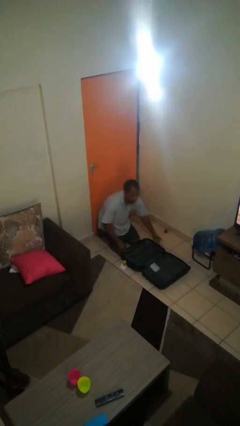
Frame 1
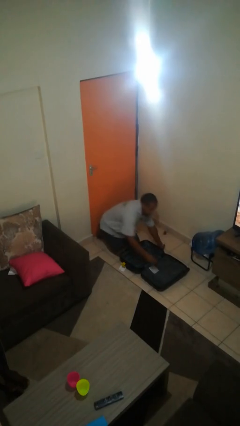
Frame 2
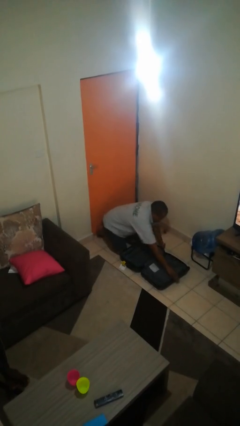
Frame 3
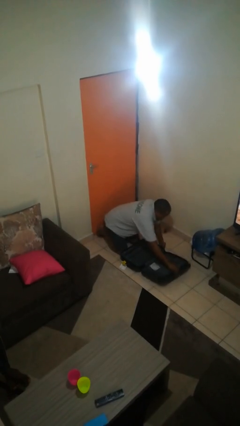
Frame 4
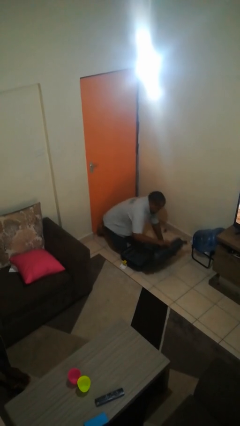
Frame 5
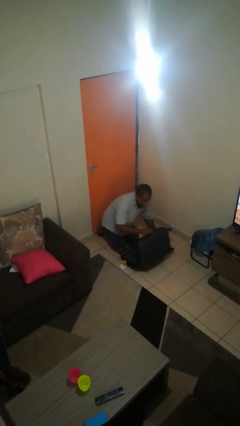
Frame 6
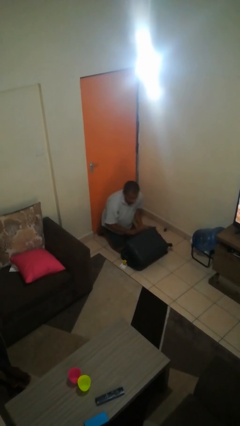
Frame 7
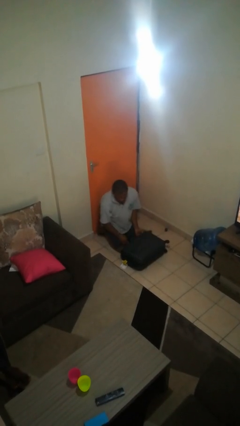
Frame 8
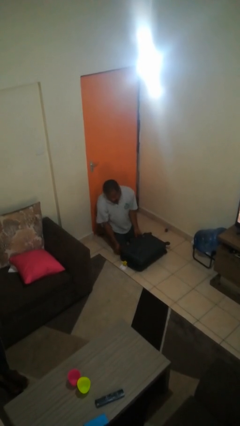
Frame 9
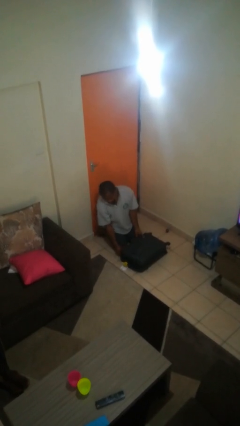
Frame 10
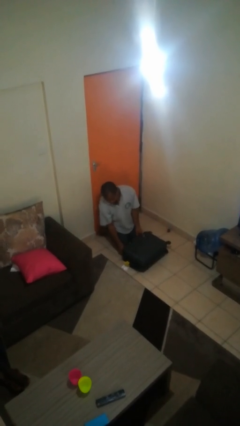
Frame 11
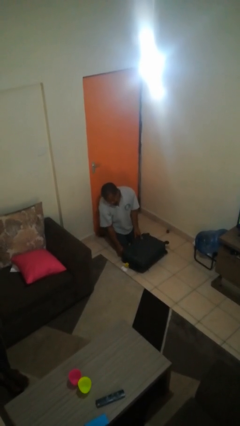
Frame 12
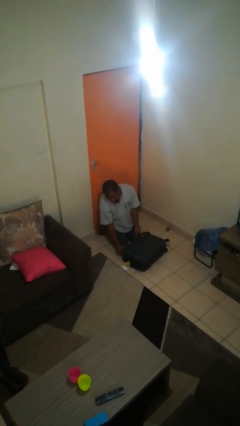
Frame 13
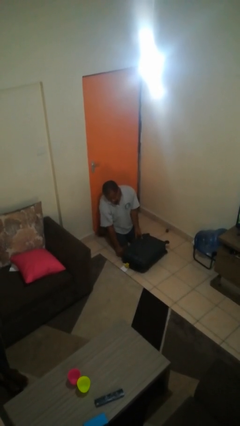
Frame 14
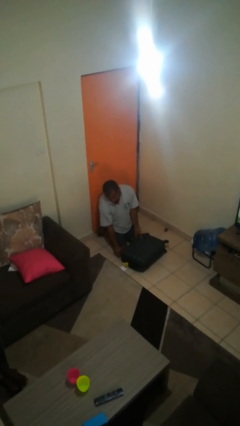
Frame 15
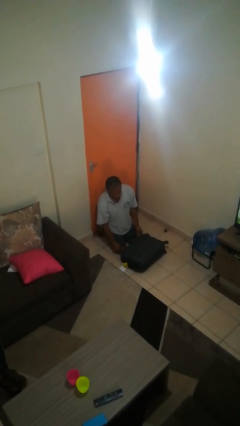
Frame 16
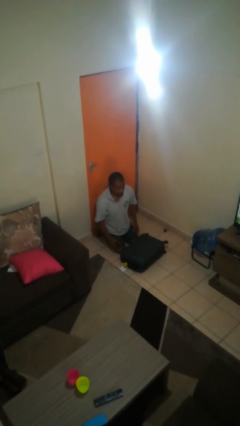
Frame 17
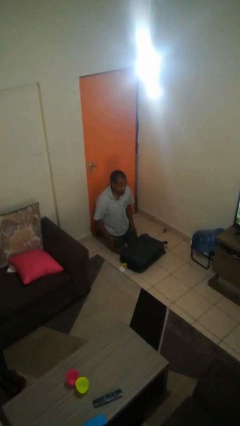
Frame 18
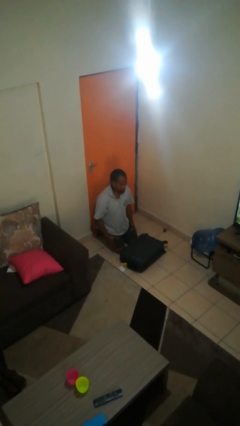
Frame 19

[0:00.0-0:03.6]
person closes suitcase

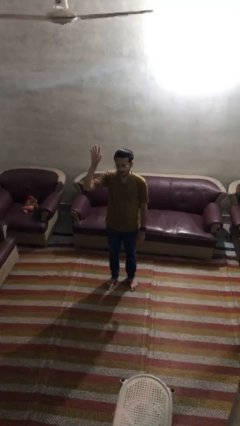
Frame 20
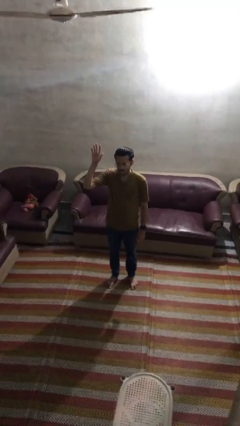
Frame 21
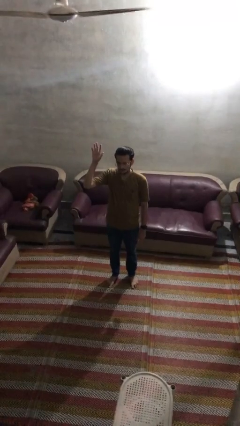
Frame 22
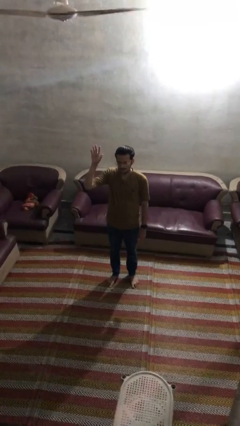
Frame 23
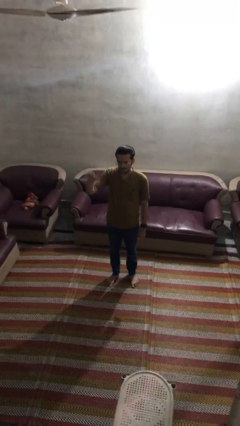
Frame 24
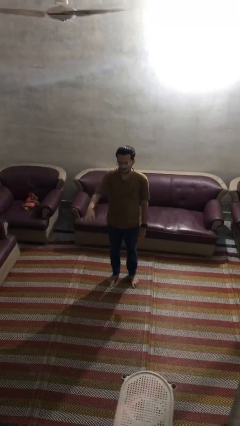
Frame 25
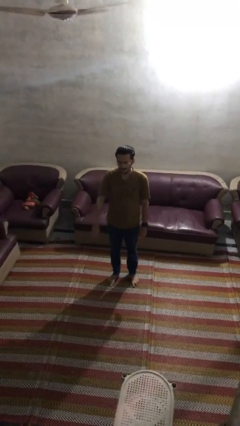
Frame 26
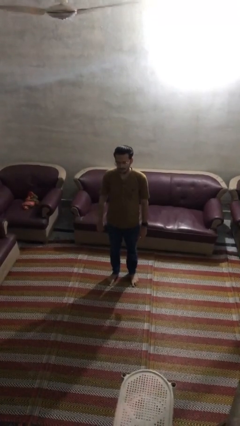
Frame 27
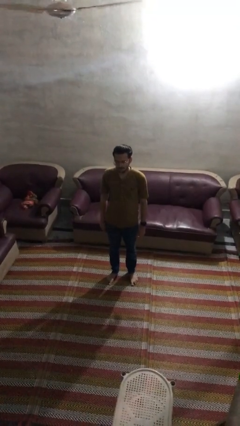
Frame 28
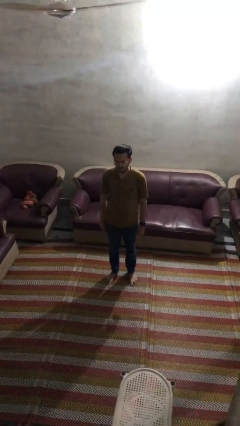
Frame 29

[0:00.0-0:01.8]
person gestures lower hand

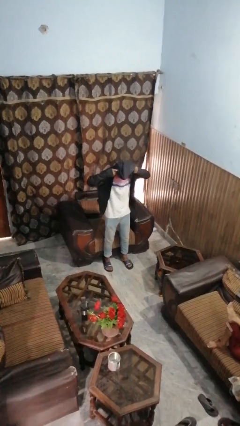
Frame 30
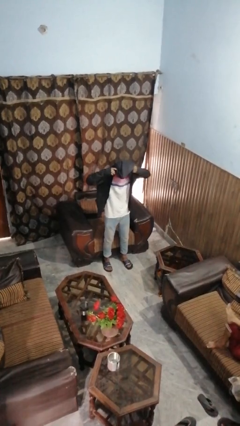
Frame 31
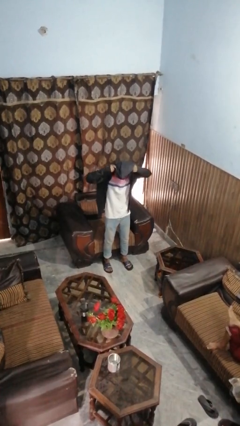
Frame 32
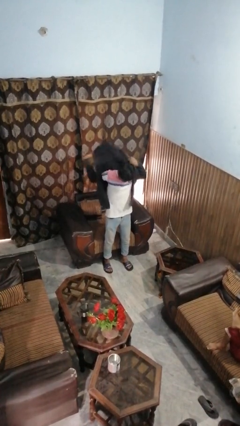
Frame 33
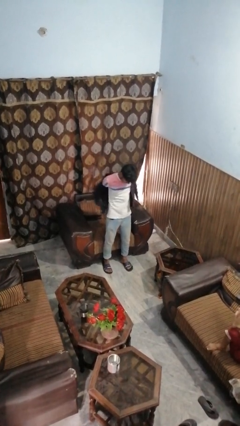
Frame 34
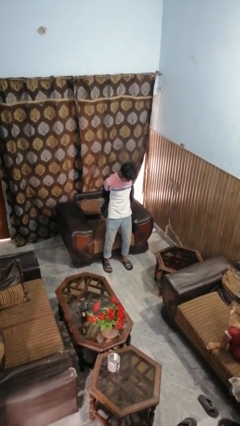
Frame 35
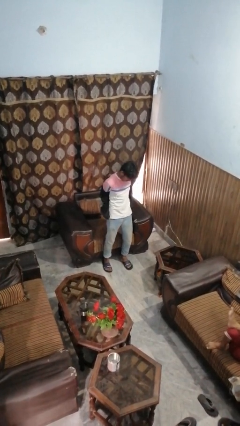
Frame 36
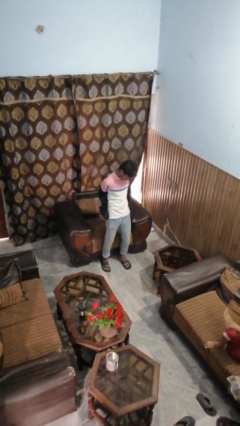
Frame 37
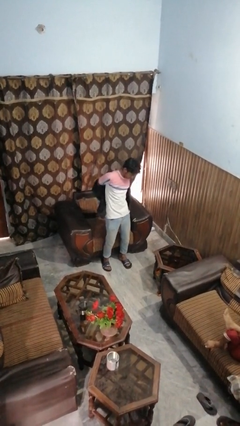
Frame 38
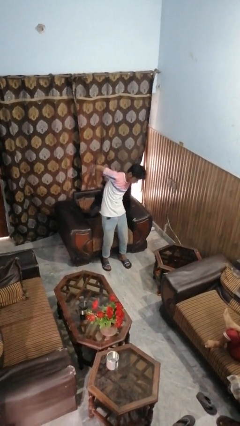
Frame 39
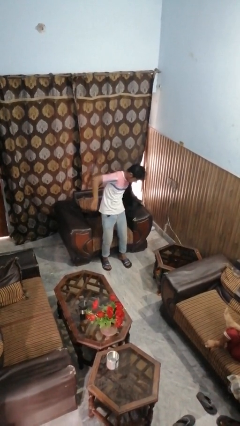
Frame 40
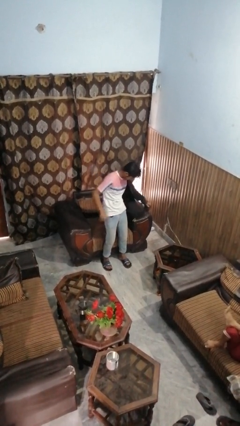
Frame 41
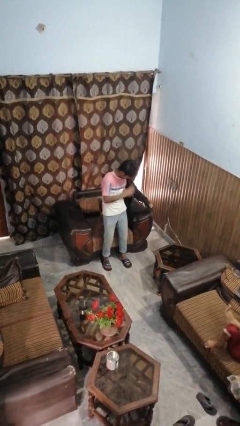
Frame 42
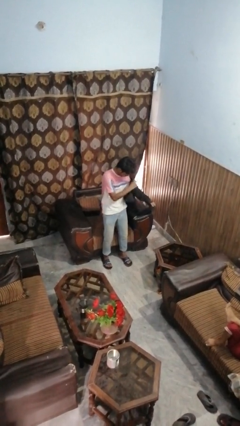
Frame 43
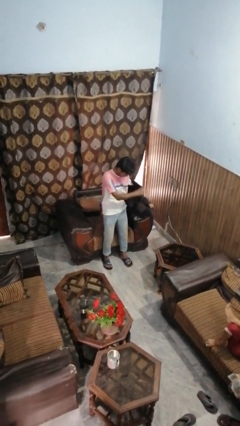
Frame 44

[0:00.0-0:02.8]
person takes off hoodie

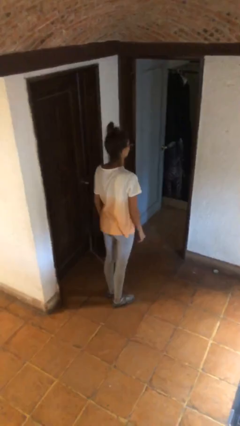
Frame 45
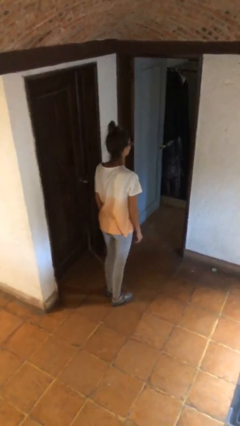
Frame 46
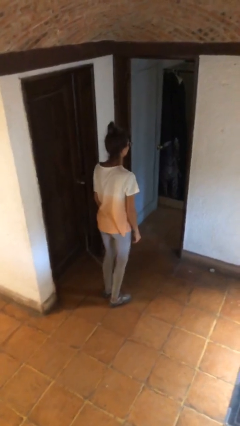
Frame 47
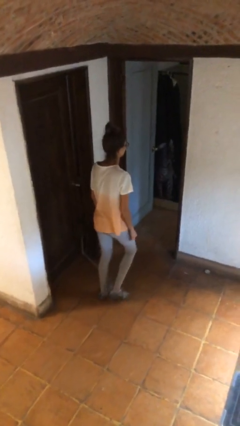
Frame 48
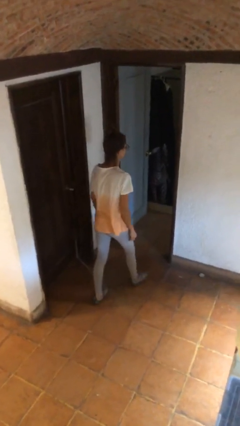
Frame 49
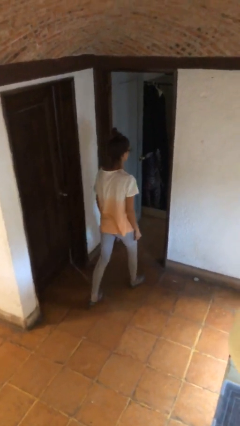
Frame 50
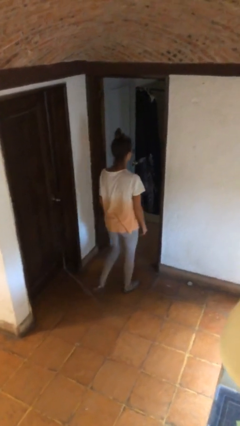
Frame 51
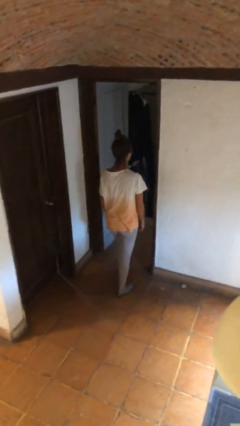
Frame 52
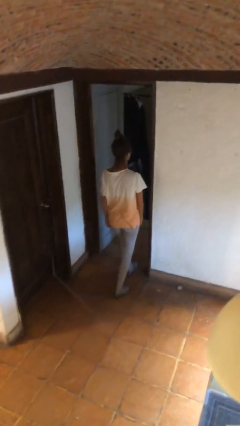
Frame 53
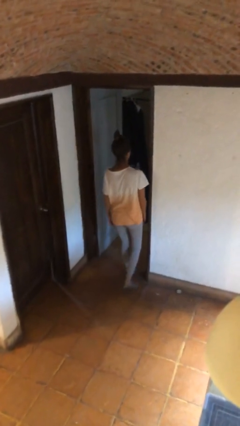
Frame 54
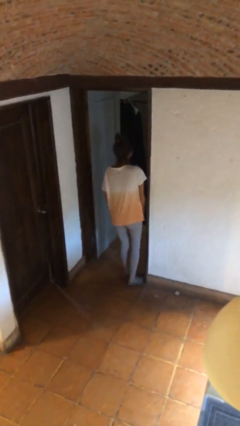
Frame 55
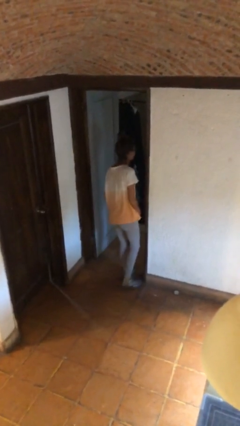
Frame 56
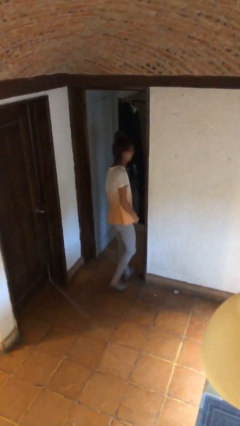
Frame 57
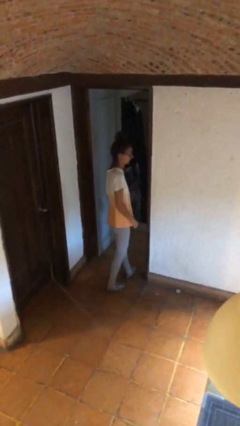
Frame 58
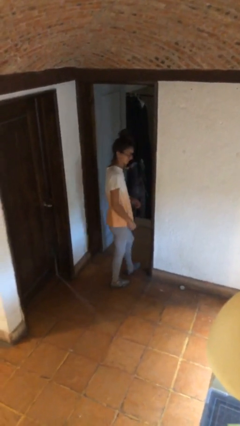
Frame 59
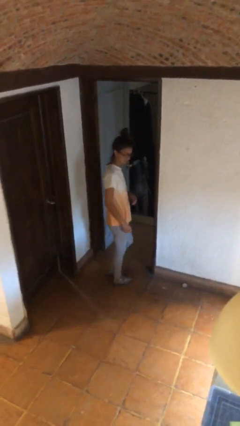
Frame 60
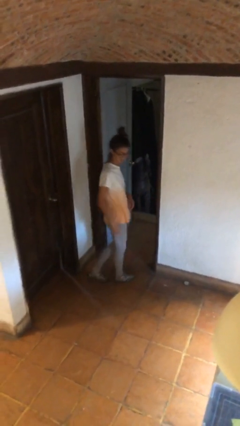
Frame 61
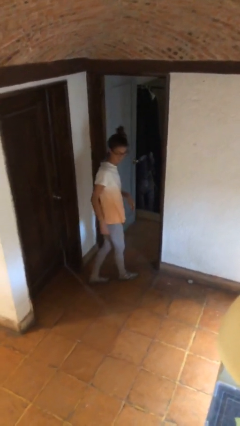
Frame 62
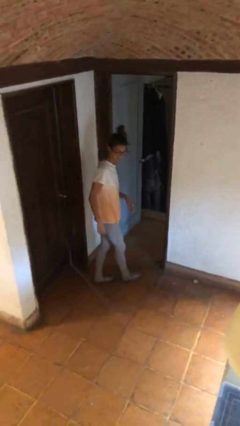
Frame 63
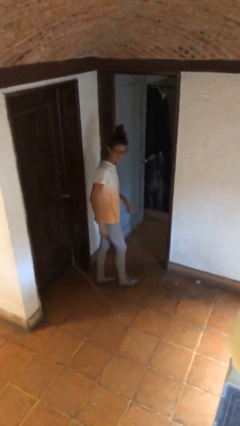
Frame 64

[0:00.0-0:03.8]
person bumps into wall

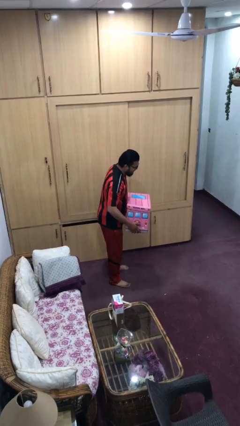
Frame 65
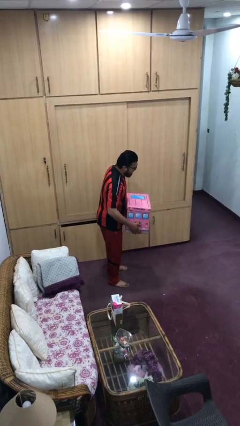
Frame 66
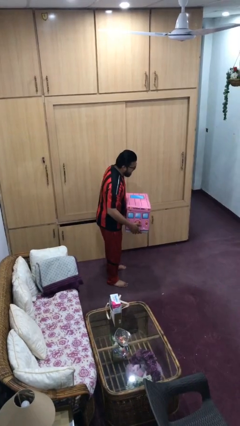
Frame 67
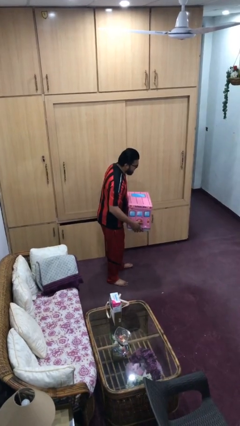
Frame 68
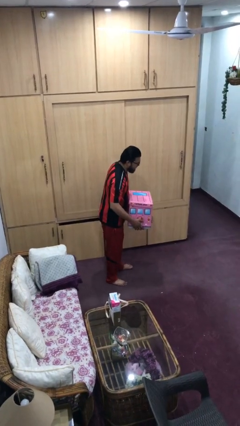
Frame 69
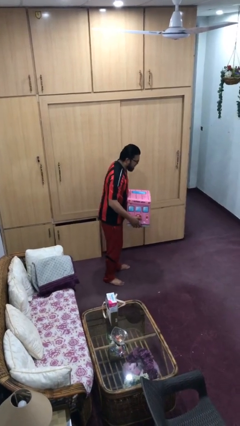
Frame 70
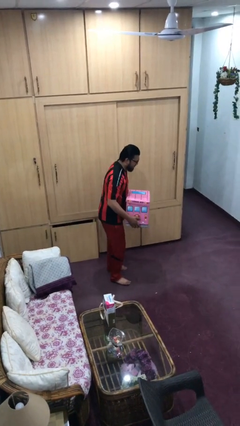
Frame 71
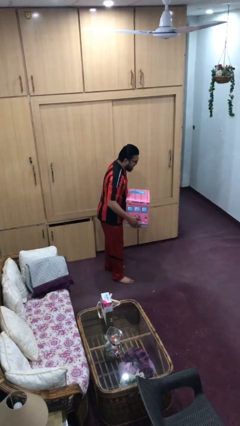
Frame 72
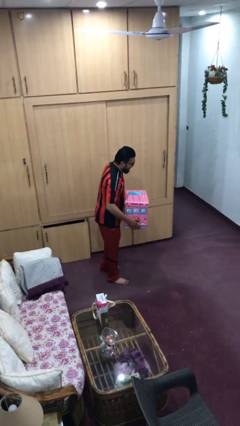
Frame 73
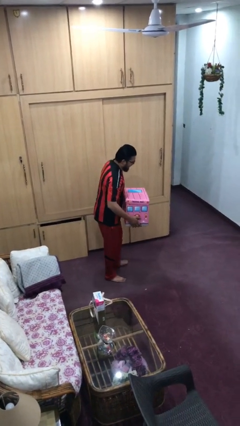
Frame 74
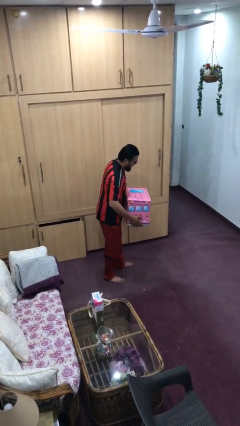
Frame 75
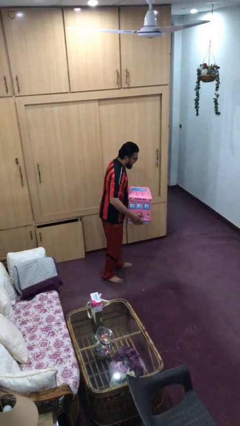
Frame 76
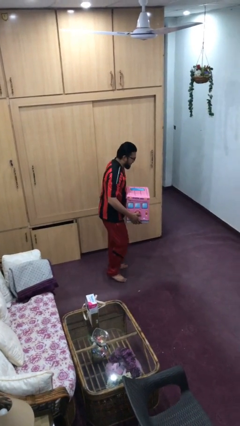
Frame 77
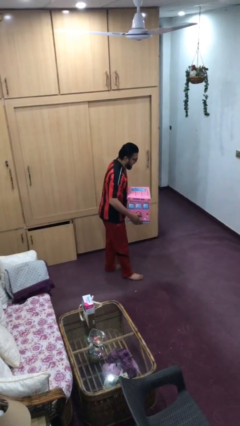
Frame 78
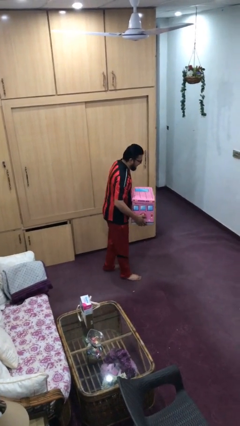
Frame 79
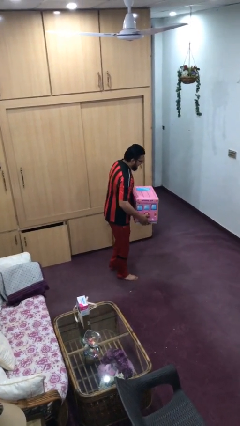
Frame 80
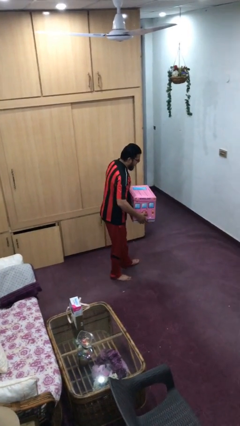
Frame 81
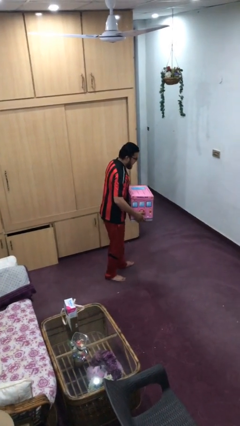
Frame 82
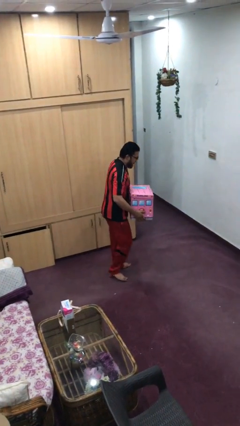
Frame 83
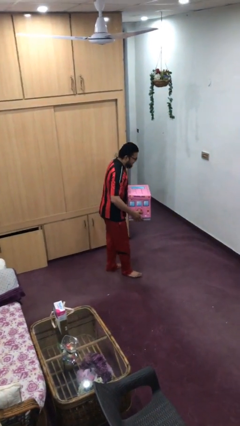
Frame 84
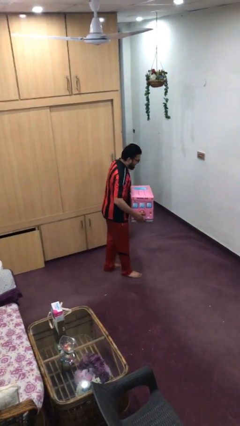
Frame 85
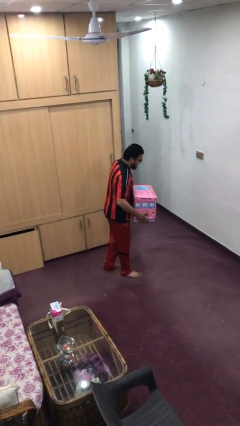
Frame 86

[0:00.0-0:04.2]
person carries heavy object

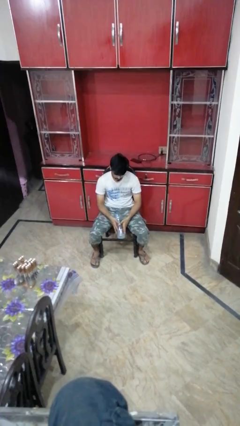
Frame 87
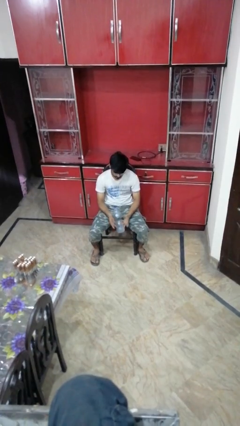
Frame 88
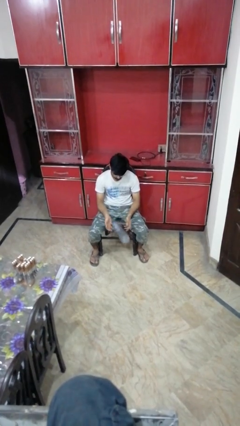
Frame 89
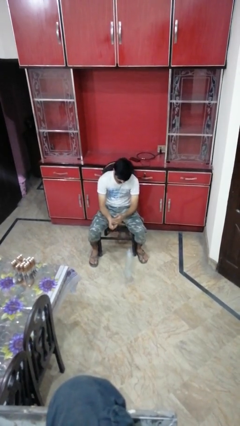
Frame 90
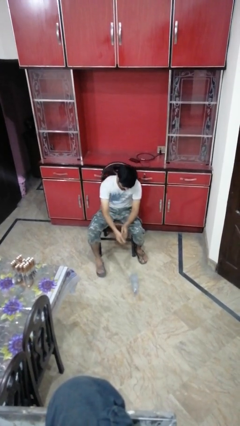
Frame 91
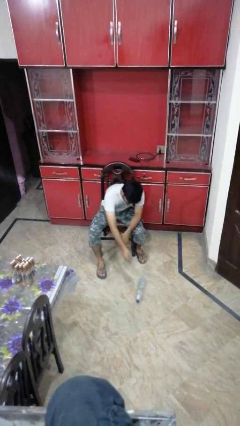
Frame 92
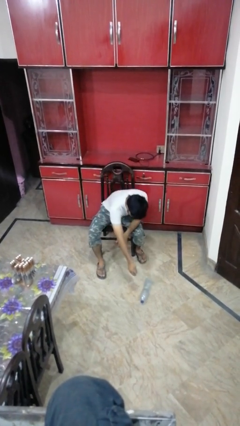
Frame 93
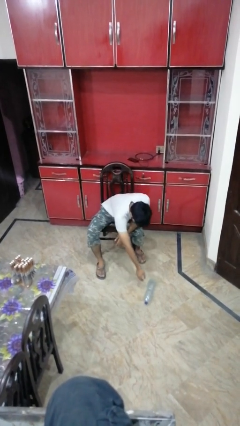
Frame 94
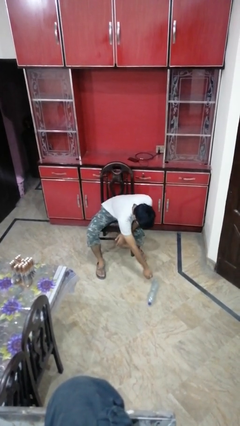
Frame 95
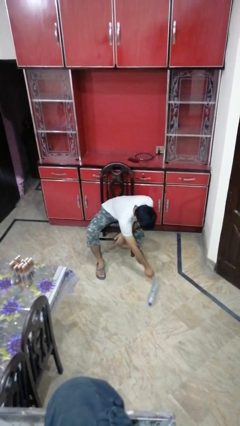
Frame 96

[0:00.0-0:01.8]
person drops object
